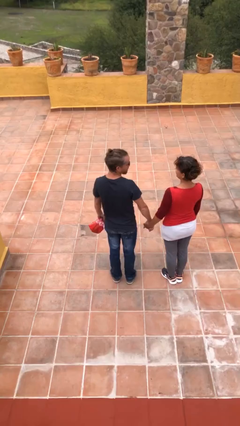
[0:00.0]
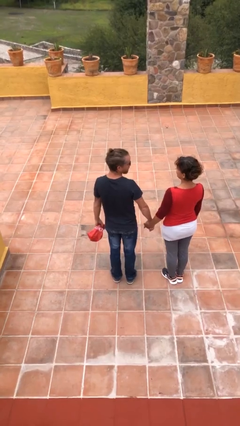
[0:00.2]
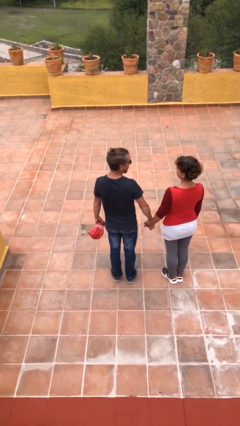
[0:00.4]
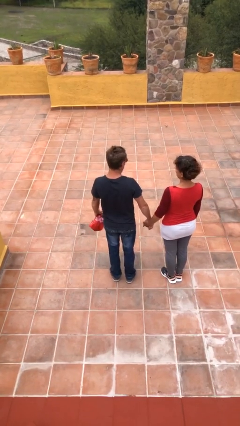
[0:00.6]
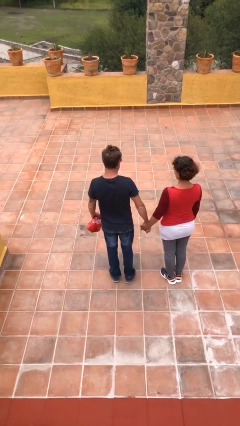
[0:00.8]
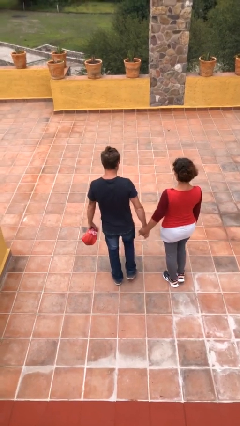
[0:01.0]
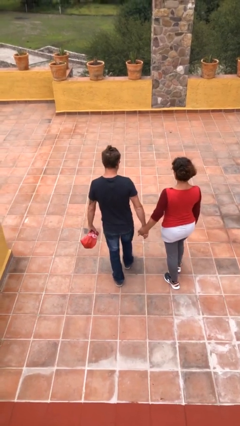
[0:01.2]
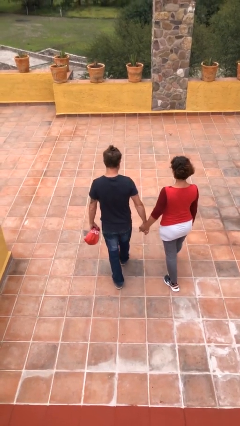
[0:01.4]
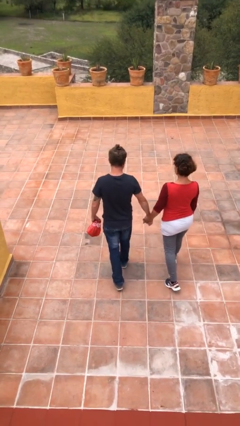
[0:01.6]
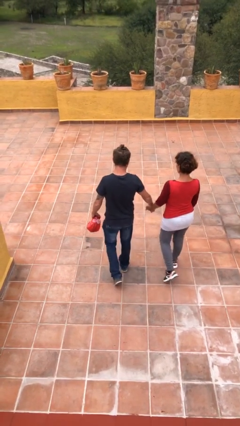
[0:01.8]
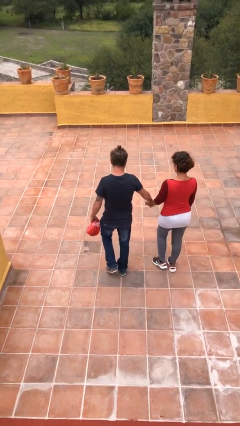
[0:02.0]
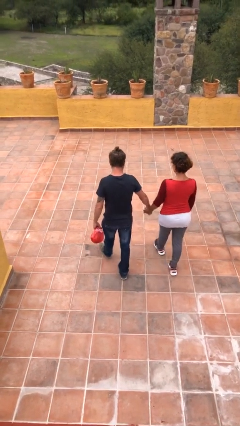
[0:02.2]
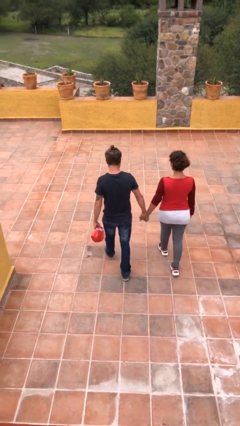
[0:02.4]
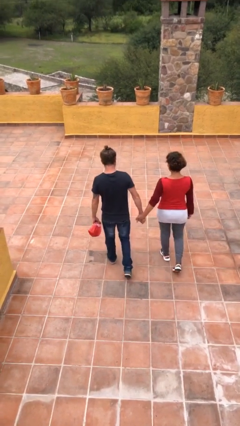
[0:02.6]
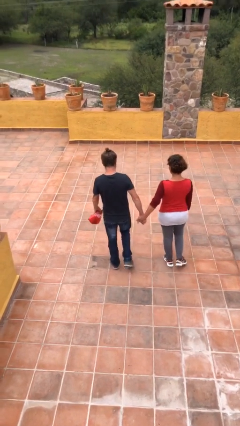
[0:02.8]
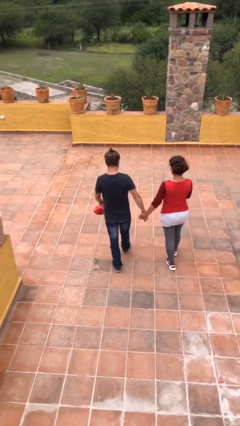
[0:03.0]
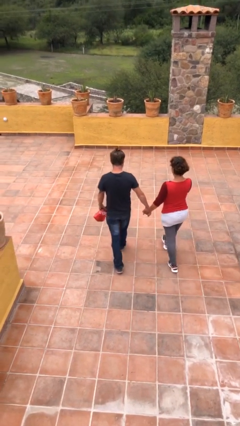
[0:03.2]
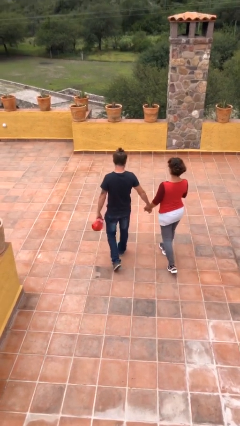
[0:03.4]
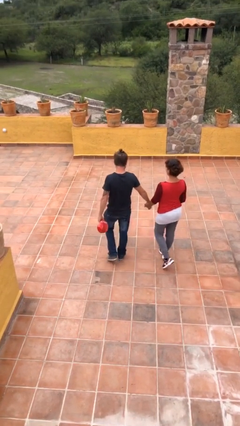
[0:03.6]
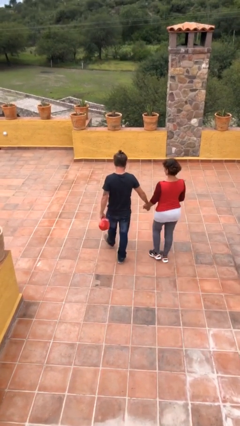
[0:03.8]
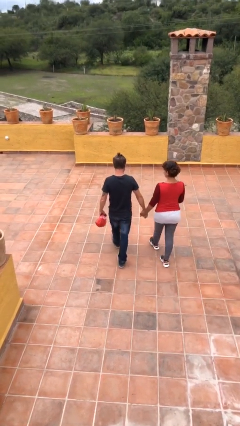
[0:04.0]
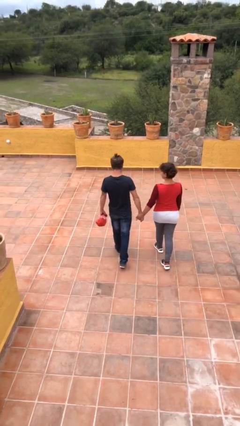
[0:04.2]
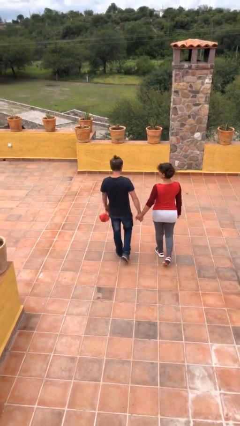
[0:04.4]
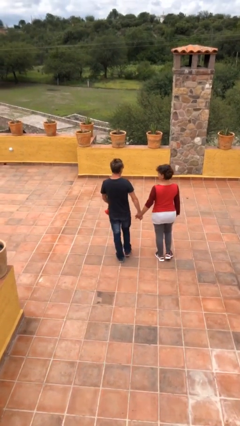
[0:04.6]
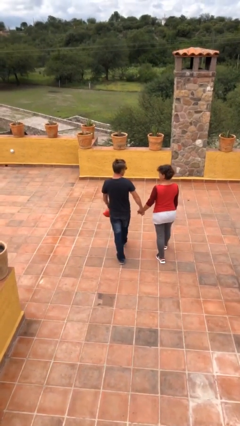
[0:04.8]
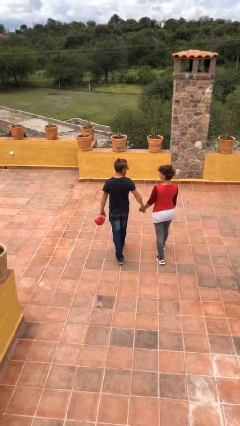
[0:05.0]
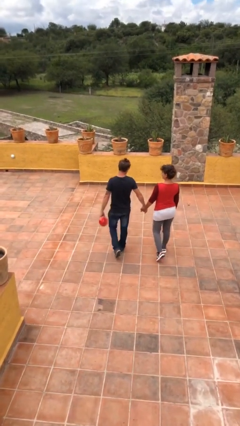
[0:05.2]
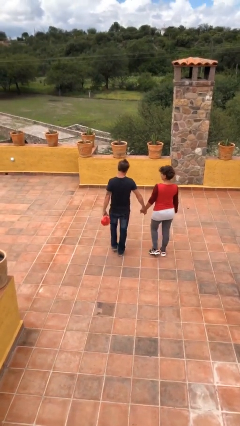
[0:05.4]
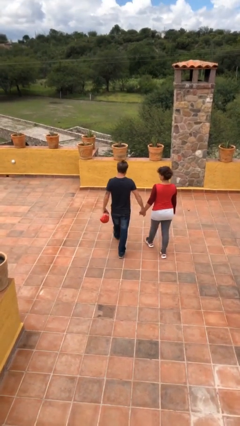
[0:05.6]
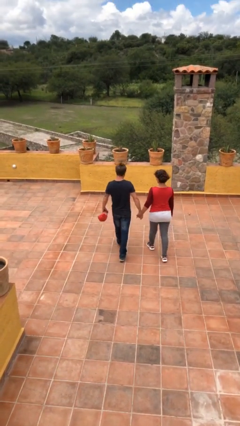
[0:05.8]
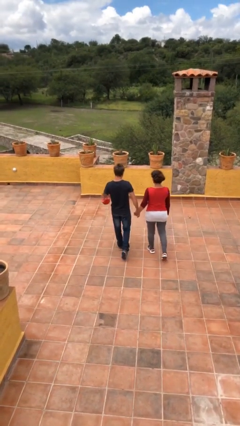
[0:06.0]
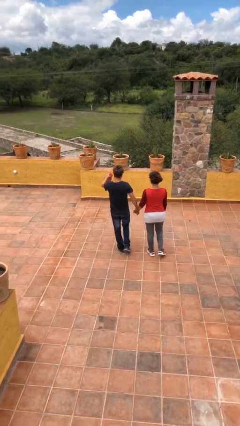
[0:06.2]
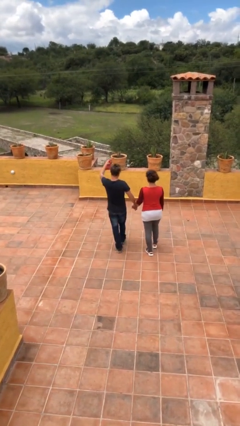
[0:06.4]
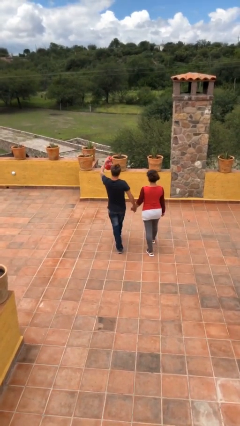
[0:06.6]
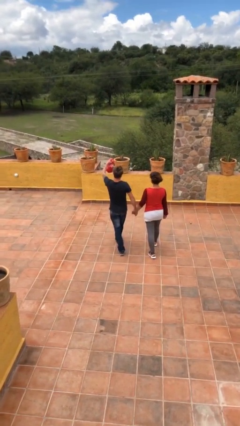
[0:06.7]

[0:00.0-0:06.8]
person holds hand

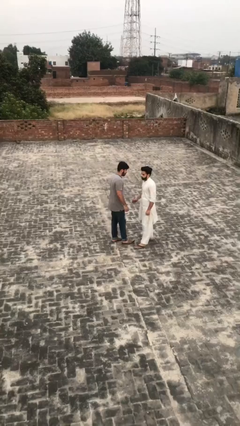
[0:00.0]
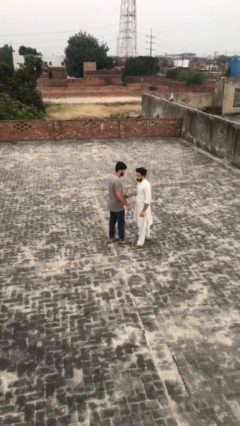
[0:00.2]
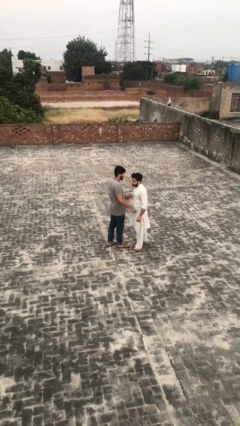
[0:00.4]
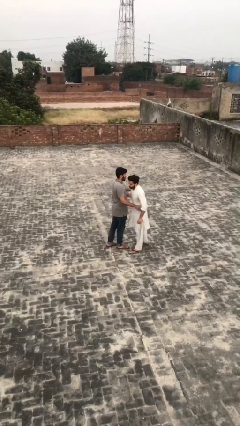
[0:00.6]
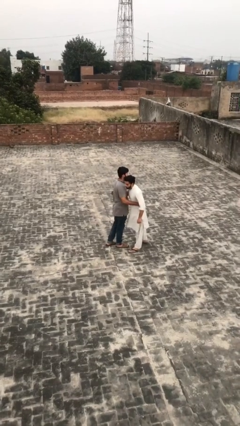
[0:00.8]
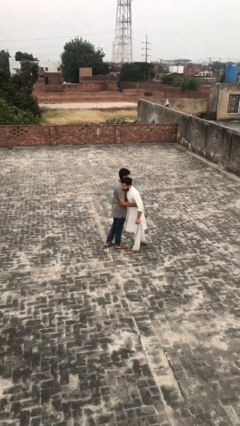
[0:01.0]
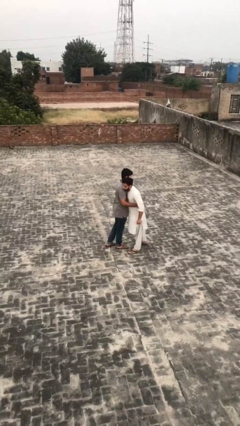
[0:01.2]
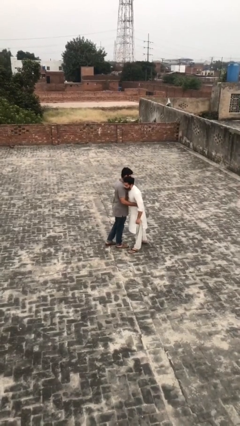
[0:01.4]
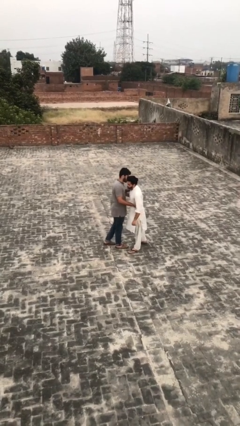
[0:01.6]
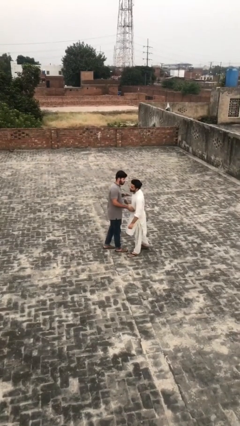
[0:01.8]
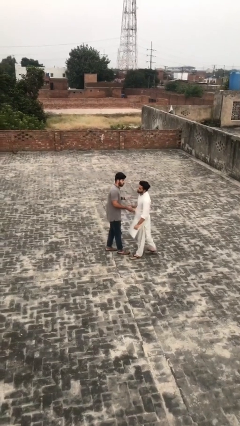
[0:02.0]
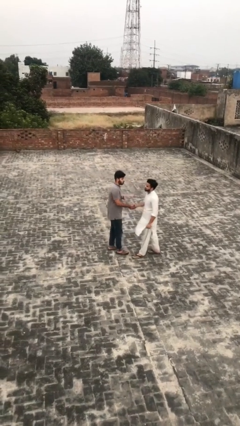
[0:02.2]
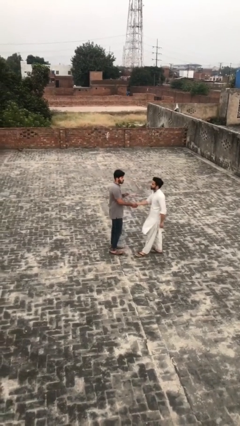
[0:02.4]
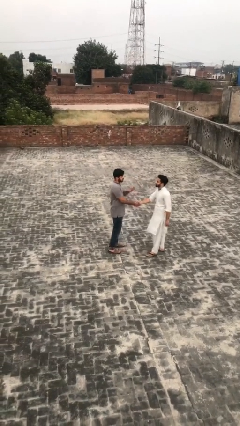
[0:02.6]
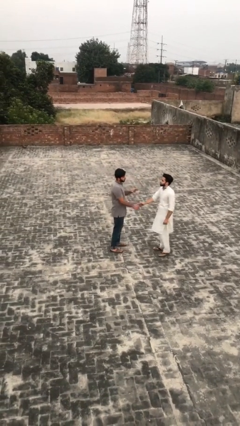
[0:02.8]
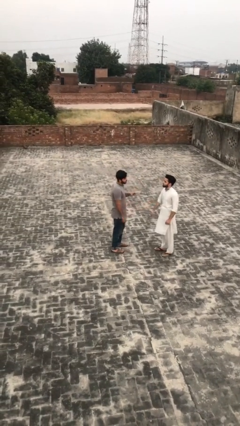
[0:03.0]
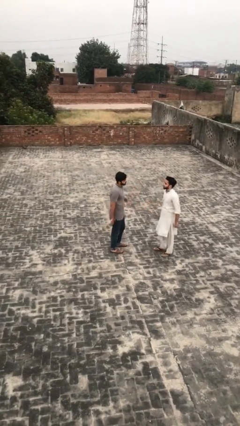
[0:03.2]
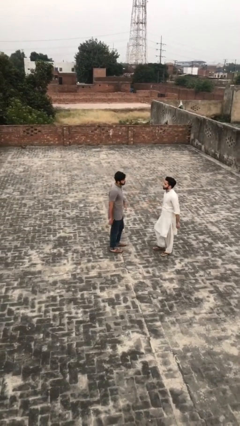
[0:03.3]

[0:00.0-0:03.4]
person embraces person

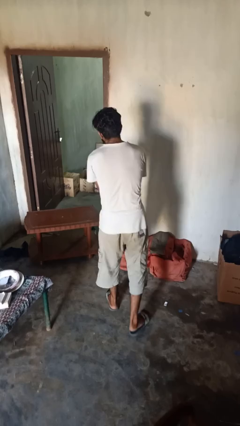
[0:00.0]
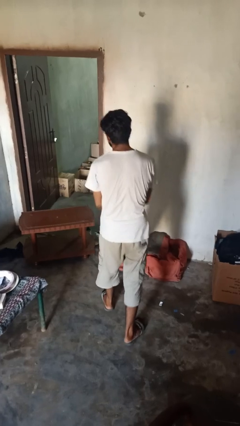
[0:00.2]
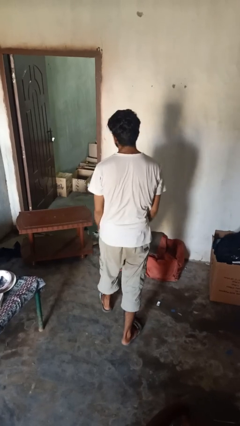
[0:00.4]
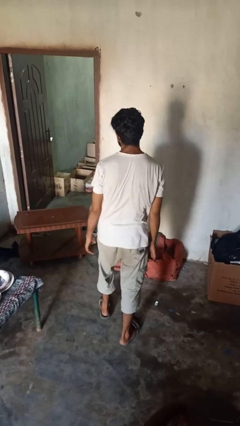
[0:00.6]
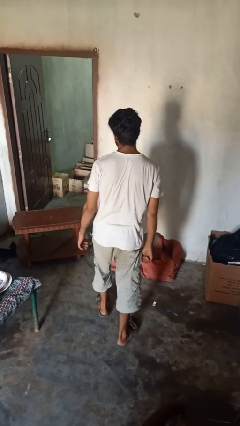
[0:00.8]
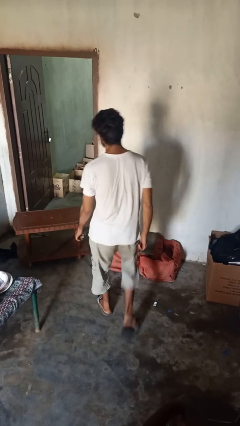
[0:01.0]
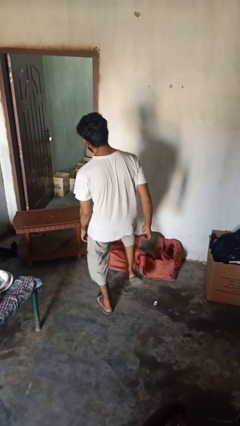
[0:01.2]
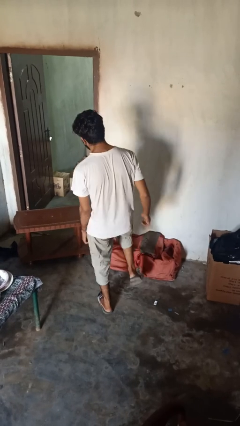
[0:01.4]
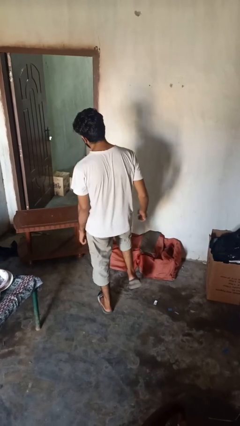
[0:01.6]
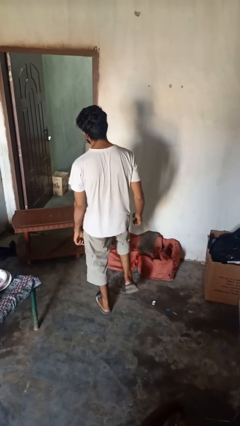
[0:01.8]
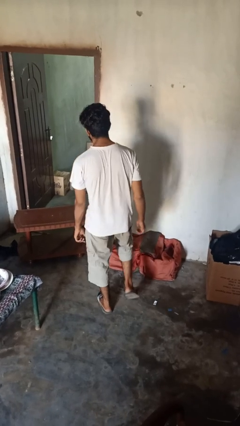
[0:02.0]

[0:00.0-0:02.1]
person karate kicks

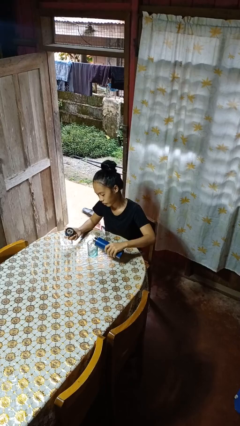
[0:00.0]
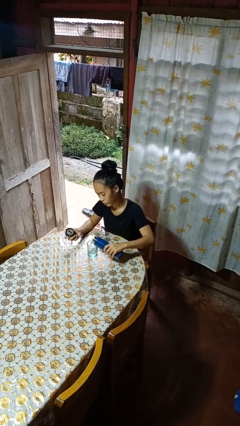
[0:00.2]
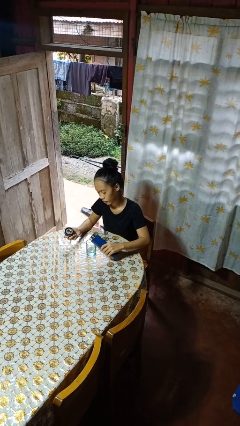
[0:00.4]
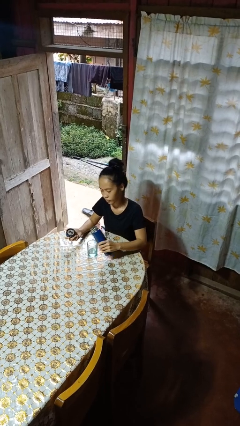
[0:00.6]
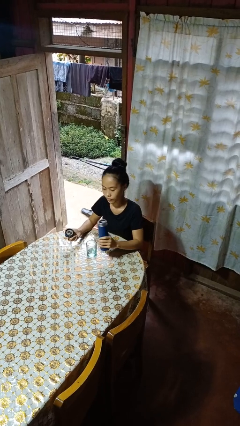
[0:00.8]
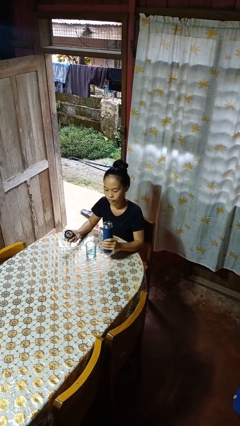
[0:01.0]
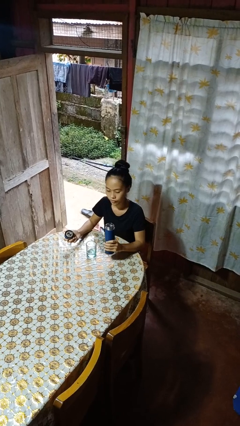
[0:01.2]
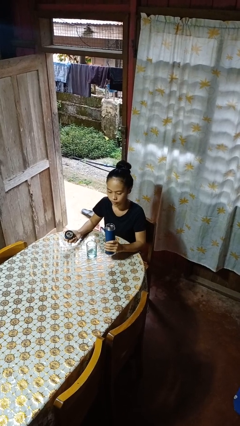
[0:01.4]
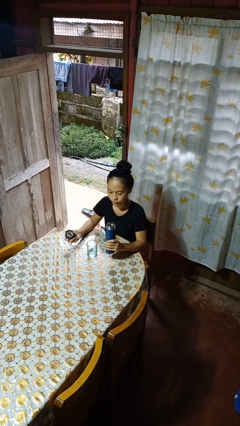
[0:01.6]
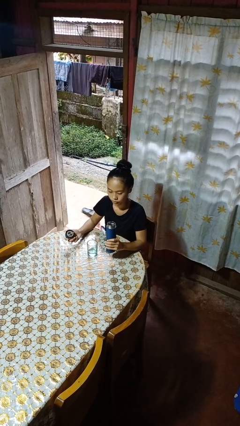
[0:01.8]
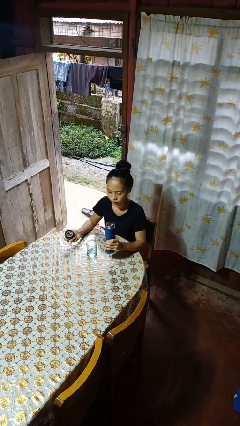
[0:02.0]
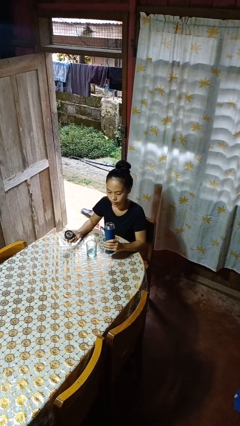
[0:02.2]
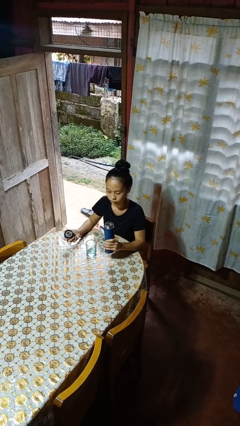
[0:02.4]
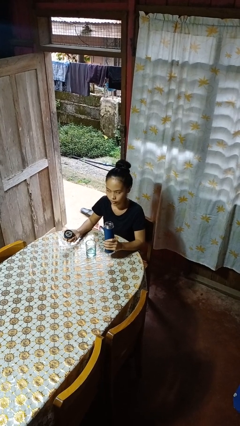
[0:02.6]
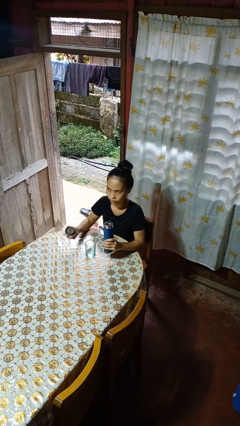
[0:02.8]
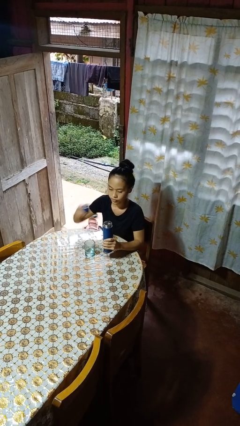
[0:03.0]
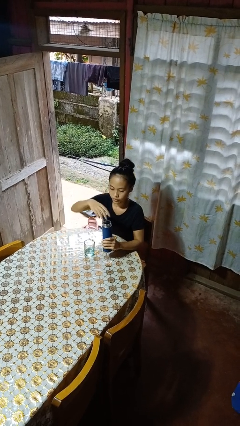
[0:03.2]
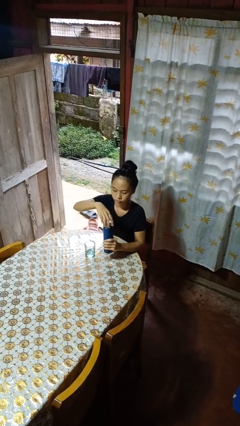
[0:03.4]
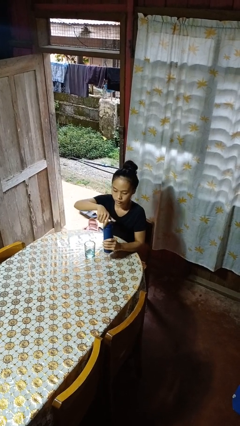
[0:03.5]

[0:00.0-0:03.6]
person pours liquid into cup

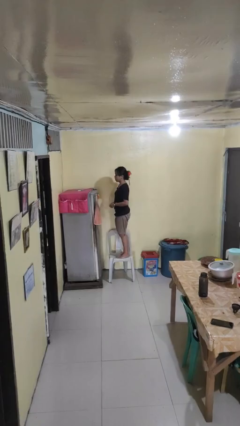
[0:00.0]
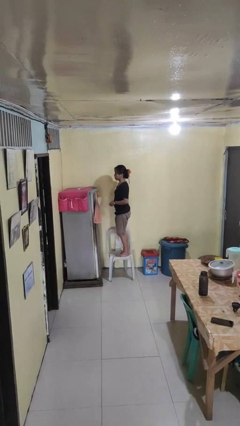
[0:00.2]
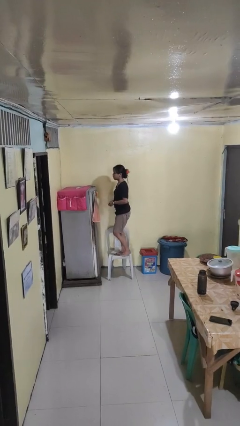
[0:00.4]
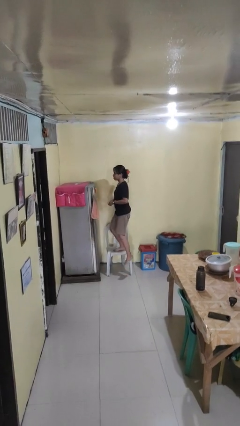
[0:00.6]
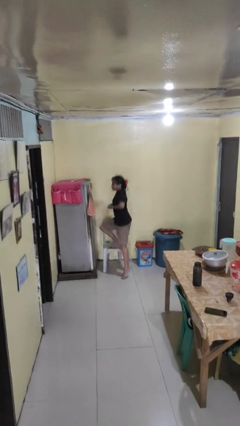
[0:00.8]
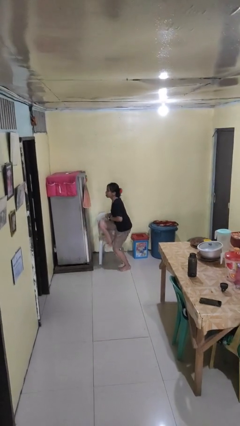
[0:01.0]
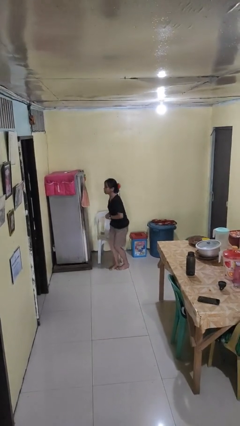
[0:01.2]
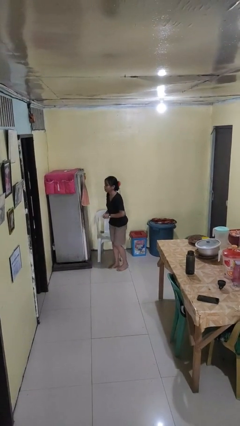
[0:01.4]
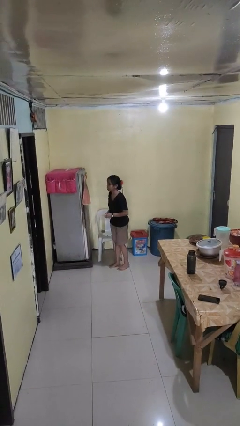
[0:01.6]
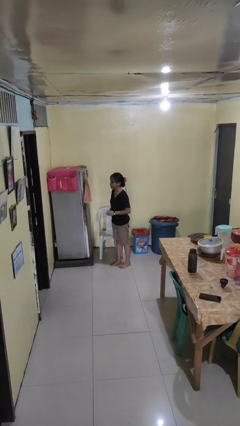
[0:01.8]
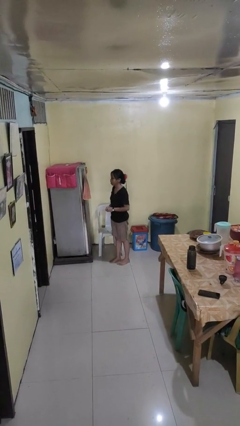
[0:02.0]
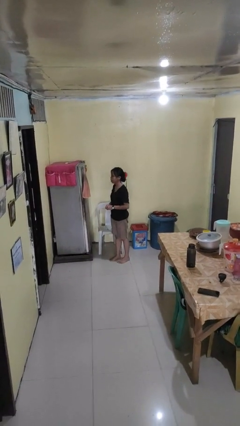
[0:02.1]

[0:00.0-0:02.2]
person climbs off chair
